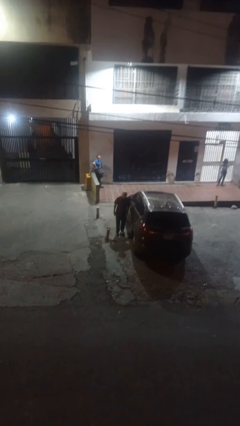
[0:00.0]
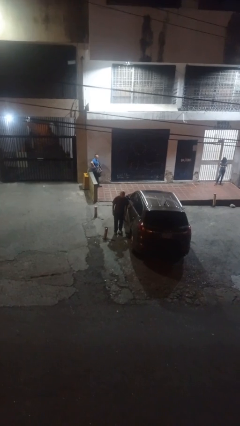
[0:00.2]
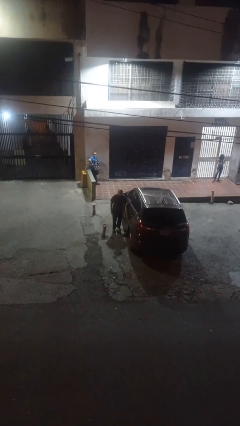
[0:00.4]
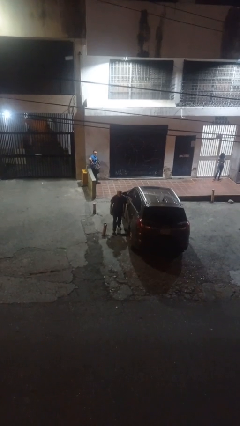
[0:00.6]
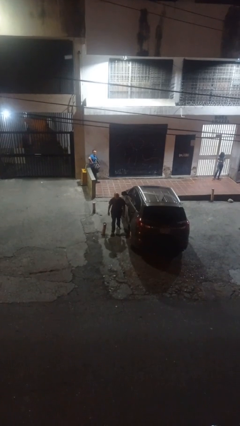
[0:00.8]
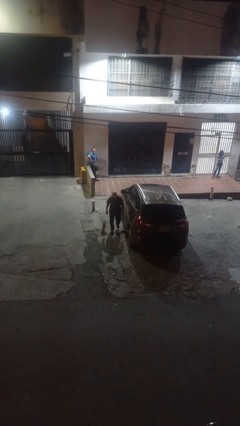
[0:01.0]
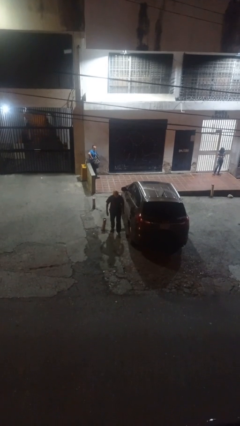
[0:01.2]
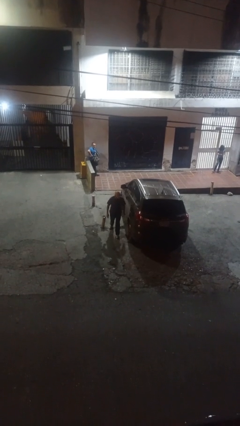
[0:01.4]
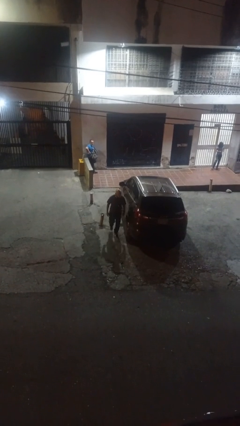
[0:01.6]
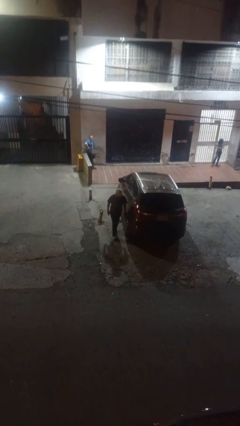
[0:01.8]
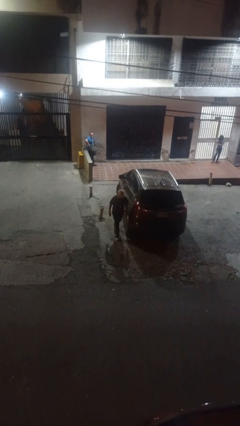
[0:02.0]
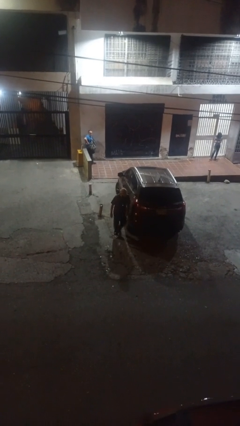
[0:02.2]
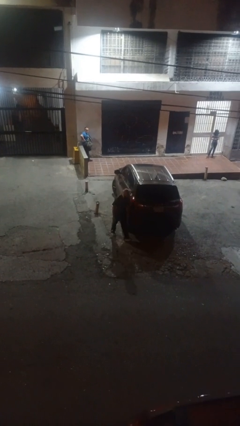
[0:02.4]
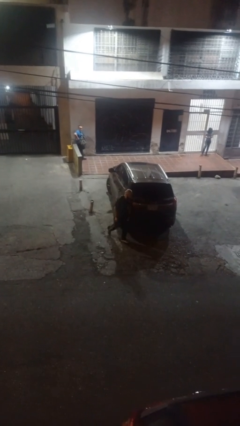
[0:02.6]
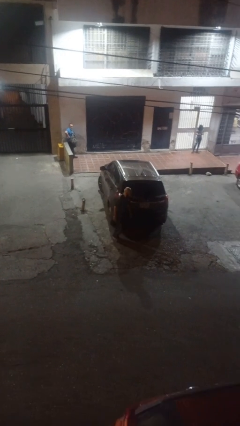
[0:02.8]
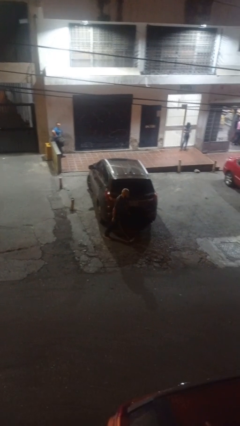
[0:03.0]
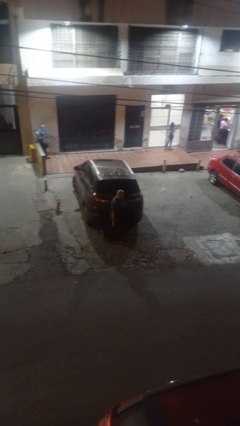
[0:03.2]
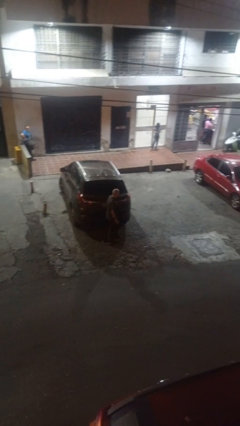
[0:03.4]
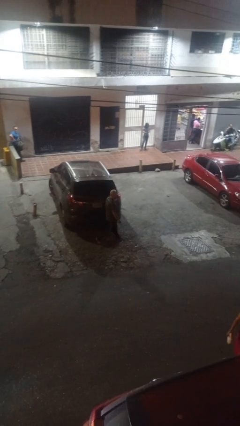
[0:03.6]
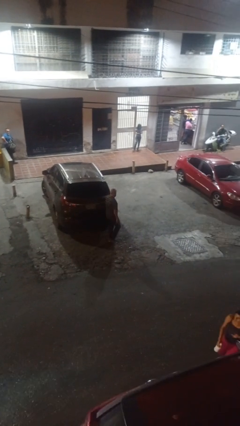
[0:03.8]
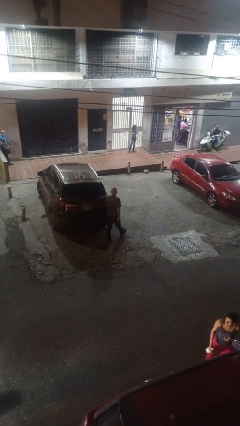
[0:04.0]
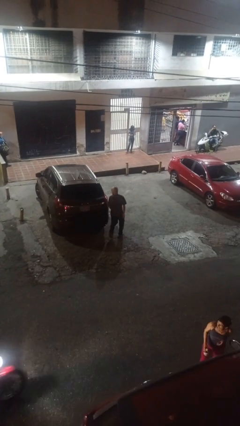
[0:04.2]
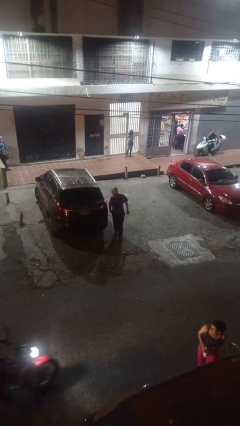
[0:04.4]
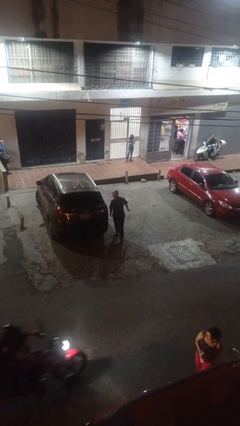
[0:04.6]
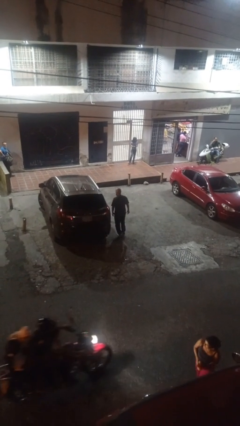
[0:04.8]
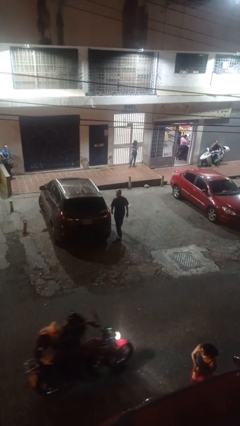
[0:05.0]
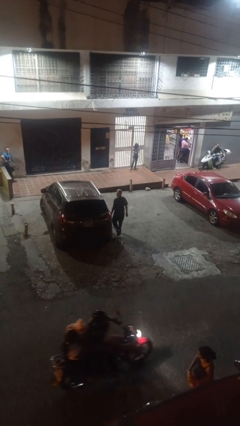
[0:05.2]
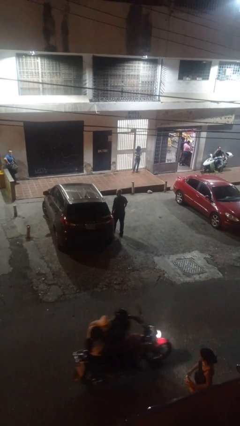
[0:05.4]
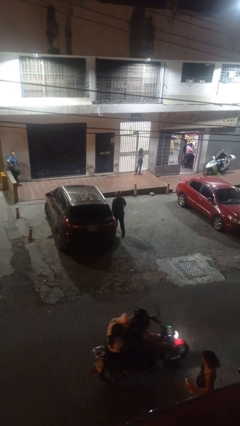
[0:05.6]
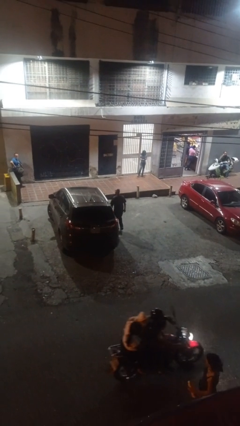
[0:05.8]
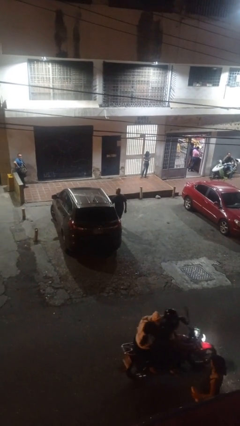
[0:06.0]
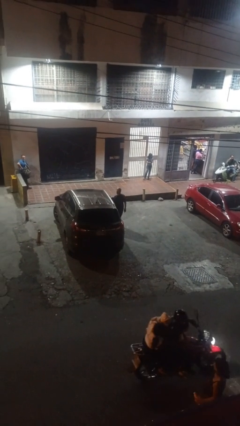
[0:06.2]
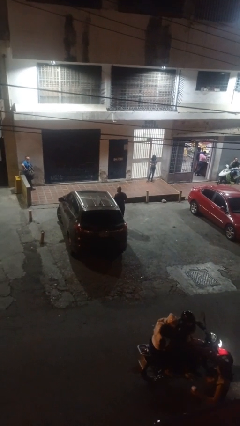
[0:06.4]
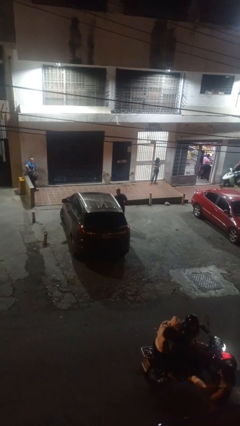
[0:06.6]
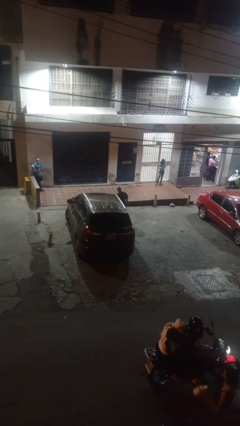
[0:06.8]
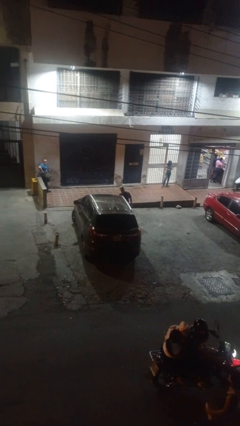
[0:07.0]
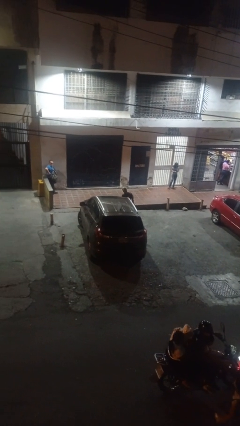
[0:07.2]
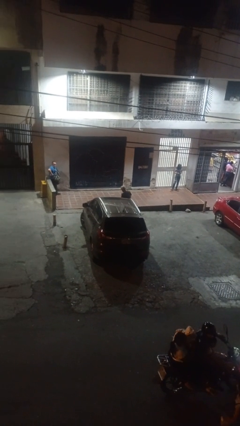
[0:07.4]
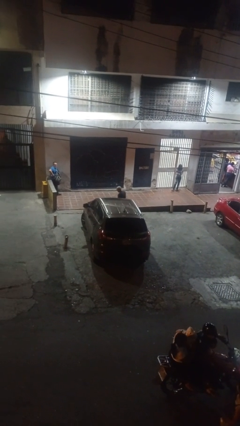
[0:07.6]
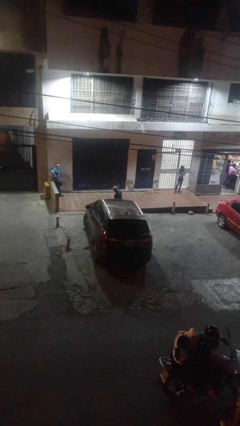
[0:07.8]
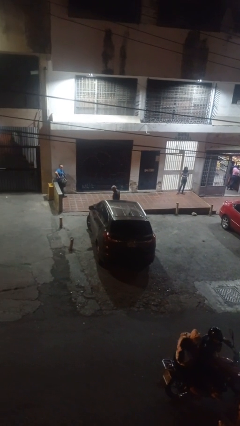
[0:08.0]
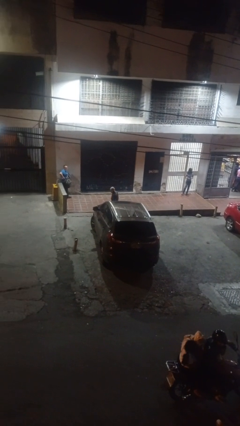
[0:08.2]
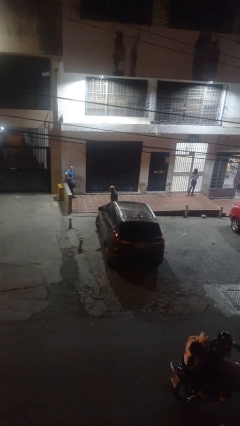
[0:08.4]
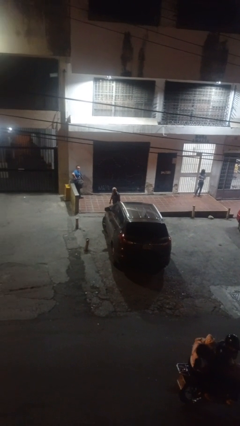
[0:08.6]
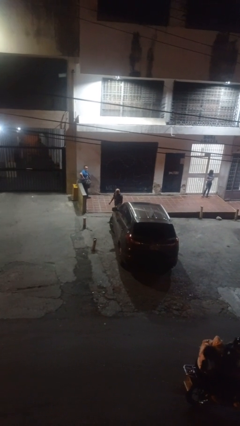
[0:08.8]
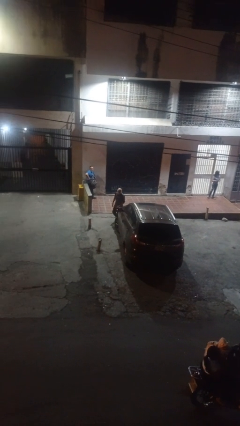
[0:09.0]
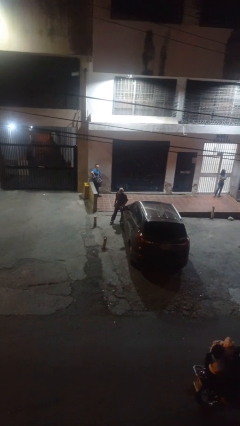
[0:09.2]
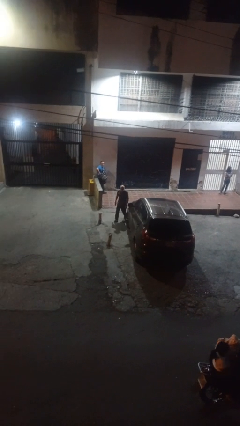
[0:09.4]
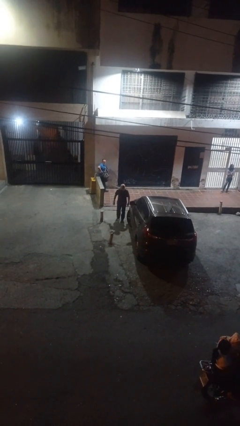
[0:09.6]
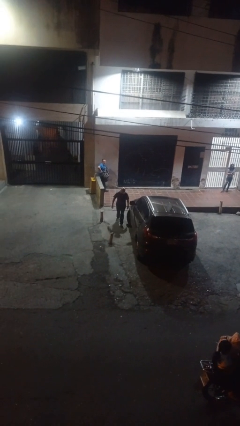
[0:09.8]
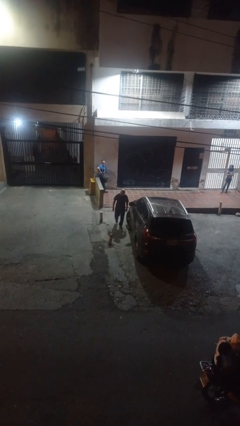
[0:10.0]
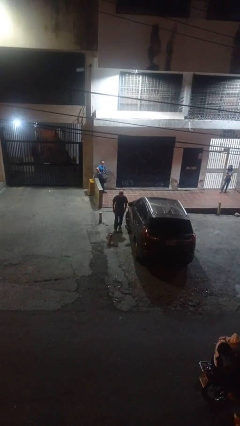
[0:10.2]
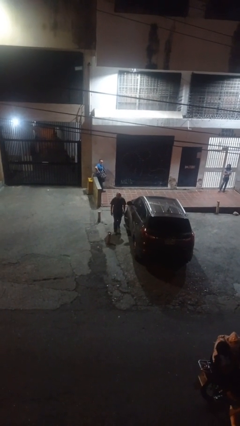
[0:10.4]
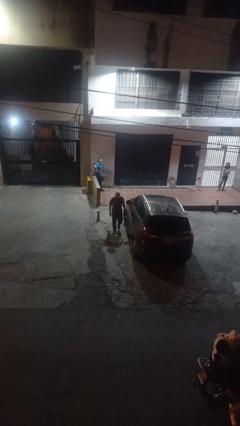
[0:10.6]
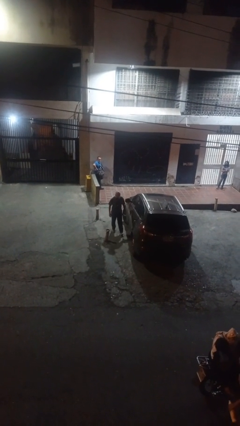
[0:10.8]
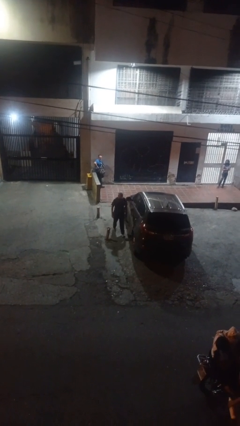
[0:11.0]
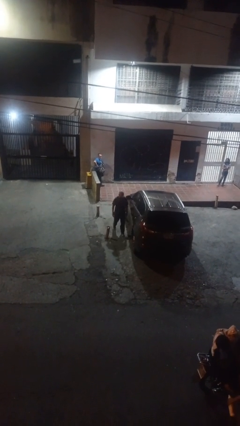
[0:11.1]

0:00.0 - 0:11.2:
person walks around car

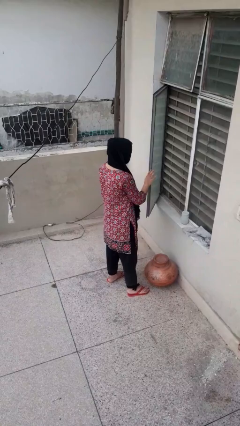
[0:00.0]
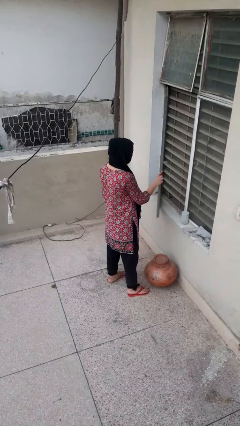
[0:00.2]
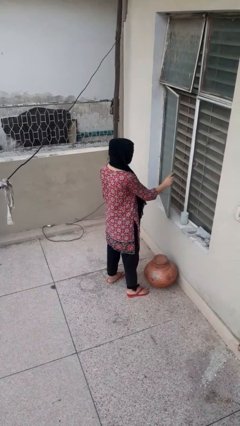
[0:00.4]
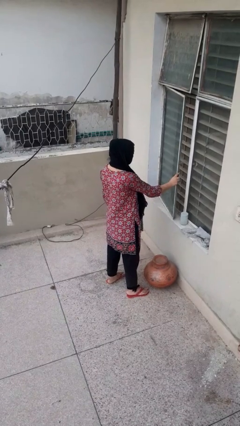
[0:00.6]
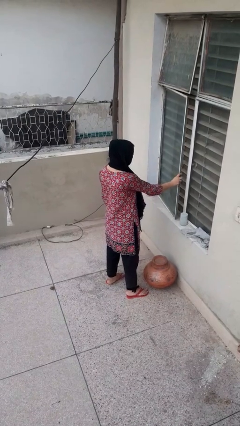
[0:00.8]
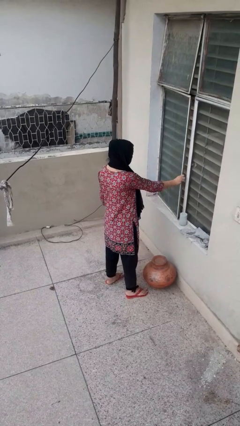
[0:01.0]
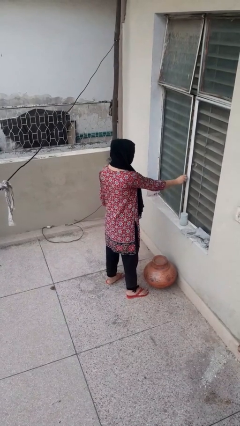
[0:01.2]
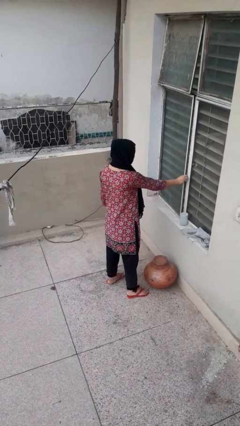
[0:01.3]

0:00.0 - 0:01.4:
person closes home window

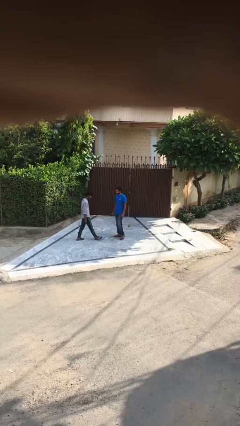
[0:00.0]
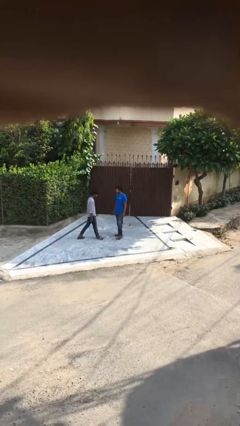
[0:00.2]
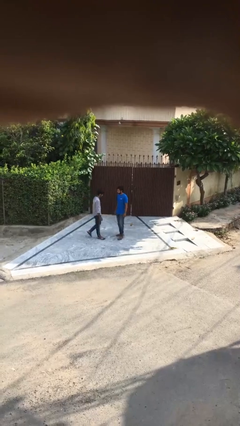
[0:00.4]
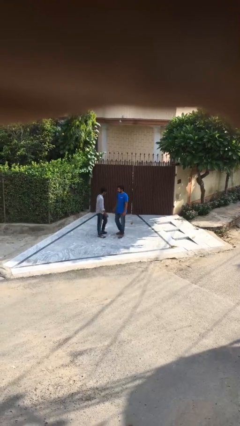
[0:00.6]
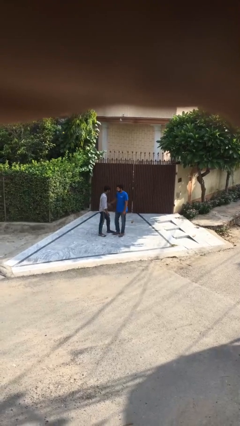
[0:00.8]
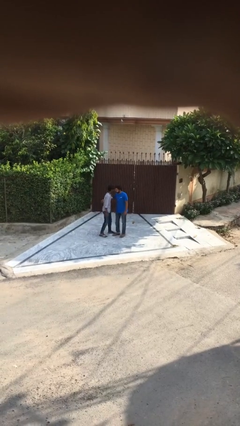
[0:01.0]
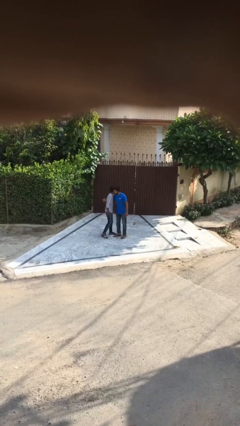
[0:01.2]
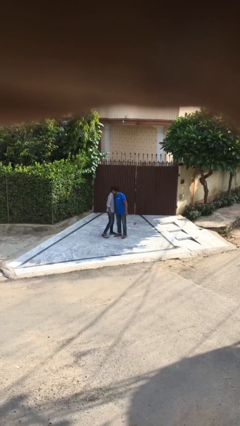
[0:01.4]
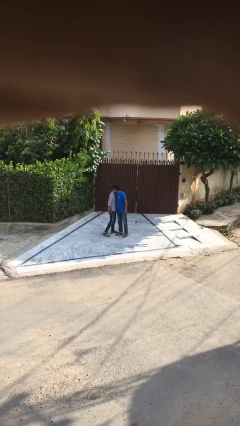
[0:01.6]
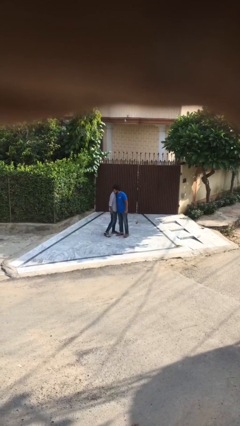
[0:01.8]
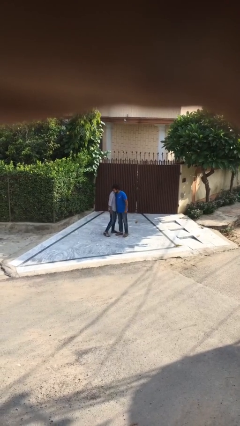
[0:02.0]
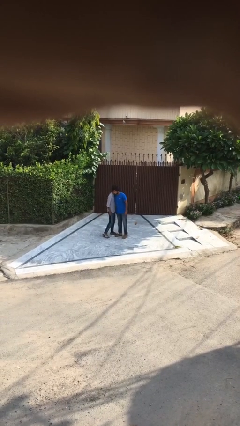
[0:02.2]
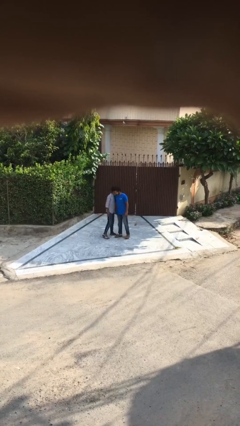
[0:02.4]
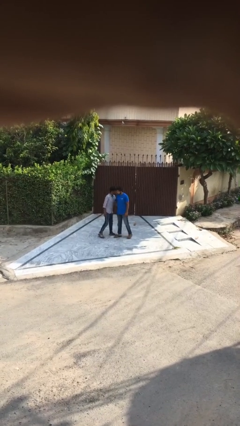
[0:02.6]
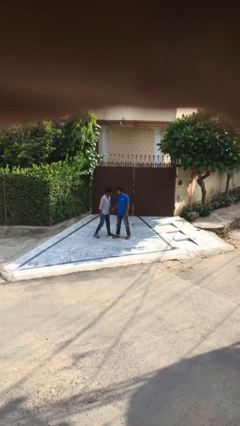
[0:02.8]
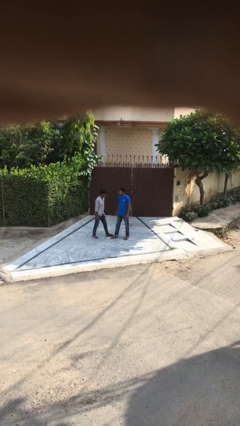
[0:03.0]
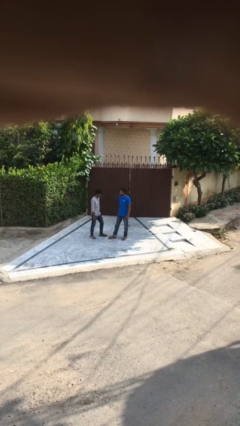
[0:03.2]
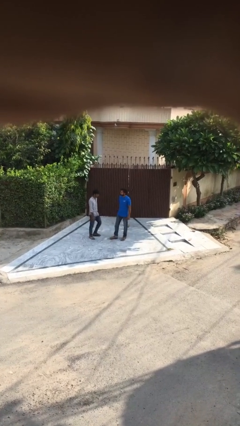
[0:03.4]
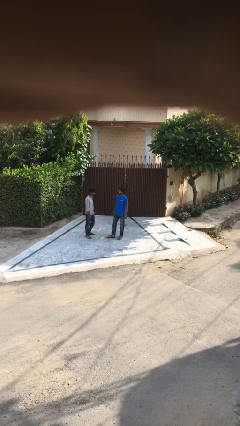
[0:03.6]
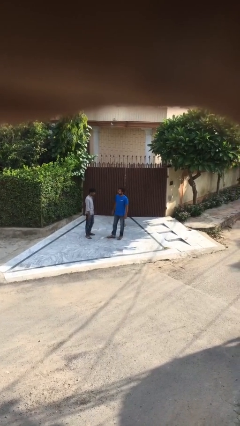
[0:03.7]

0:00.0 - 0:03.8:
person embraces person

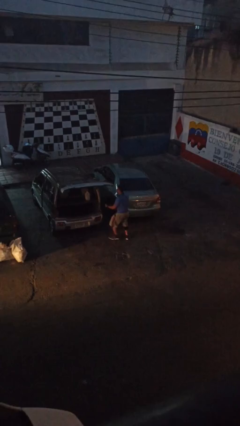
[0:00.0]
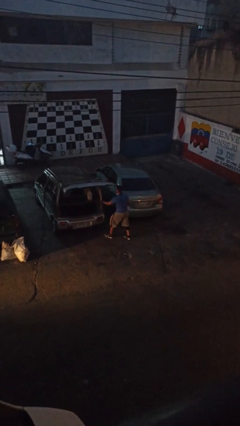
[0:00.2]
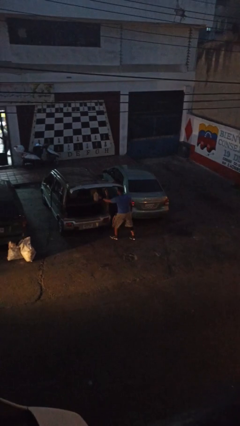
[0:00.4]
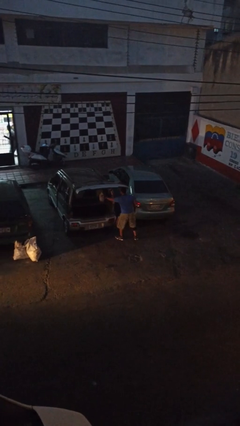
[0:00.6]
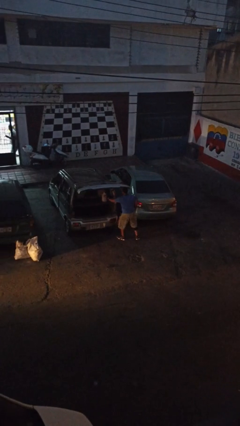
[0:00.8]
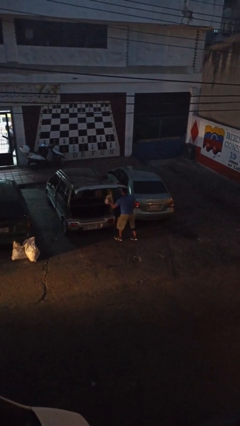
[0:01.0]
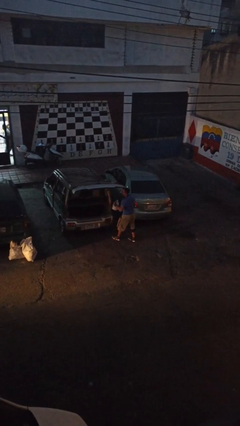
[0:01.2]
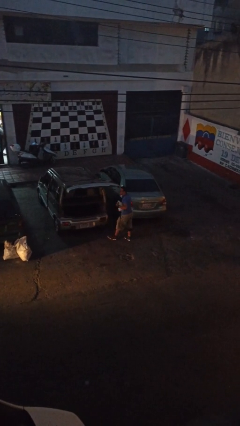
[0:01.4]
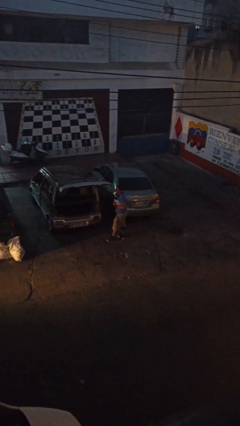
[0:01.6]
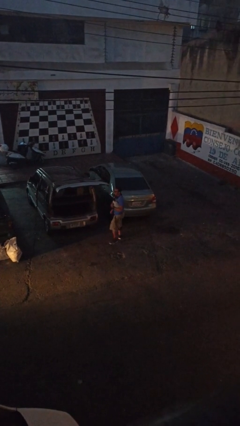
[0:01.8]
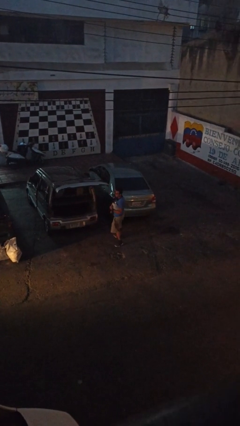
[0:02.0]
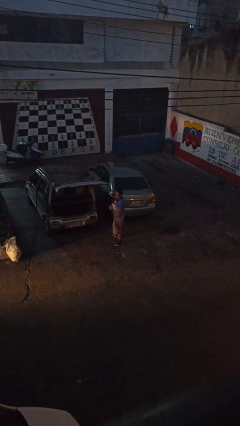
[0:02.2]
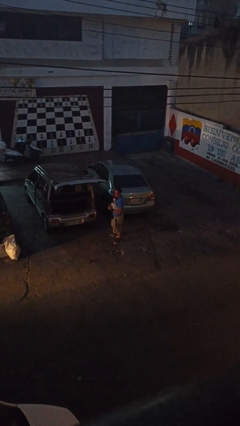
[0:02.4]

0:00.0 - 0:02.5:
person unloads car
